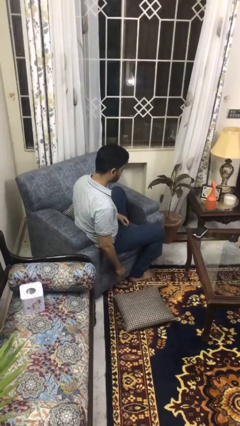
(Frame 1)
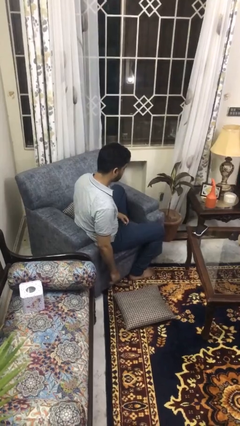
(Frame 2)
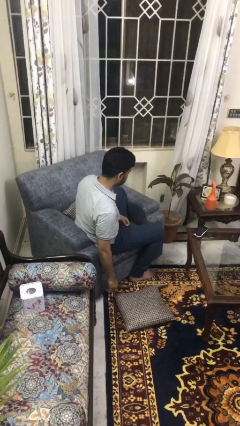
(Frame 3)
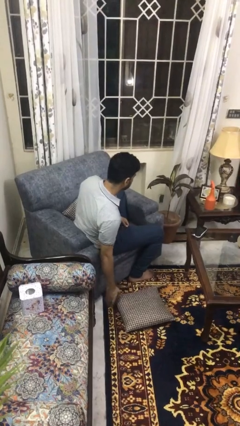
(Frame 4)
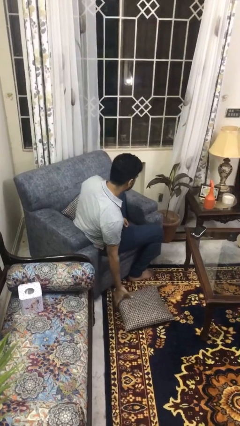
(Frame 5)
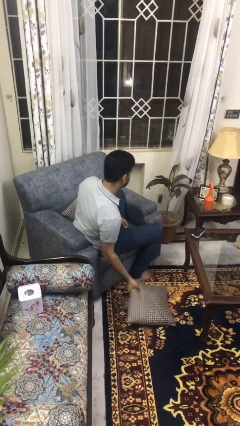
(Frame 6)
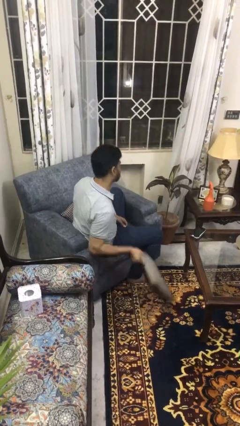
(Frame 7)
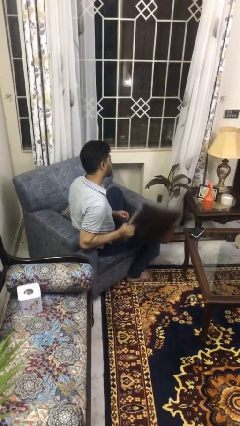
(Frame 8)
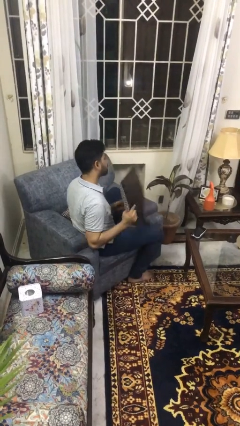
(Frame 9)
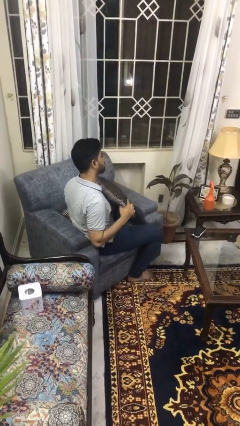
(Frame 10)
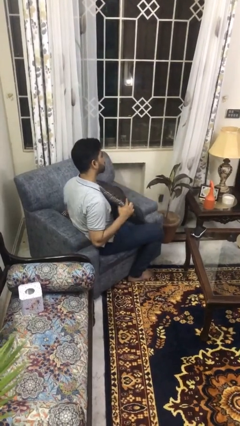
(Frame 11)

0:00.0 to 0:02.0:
person picks up object from floor

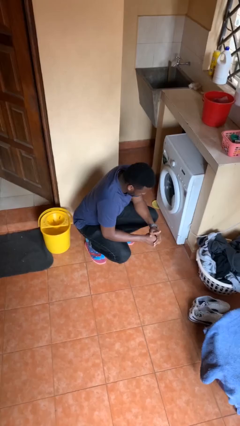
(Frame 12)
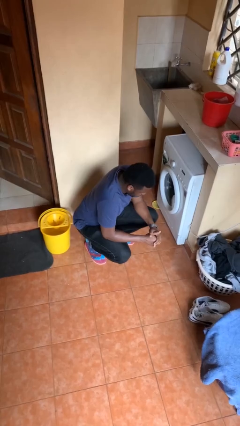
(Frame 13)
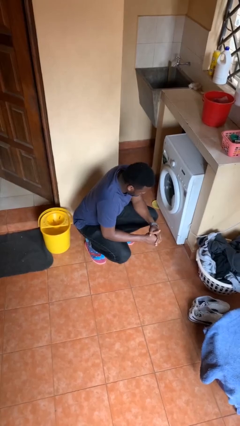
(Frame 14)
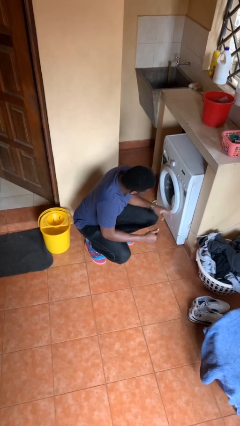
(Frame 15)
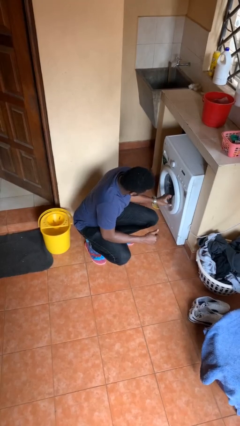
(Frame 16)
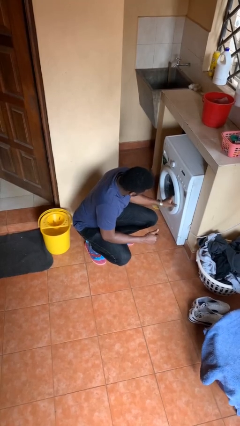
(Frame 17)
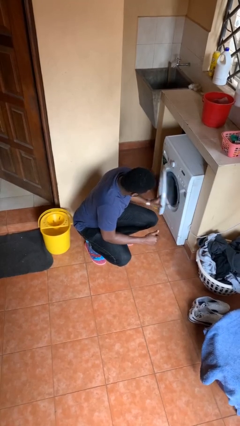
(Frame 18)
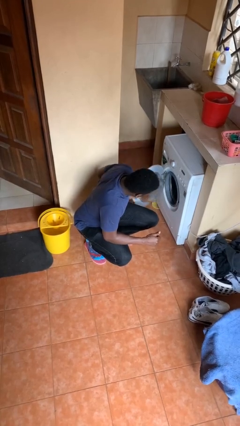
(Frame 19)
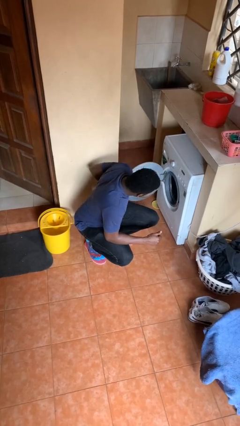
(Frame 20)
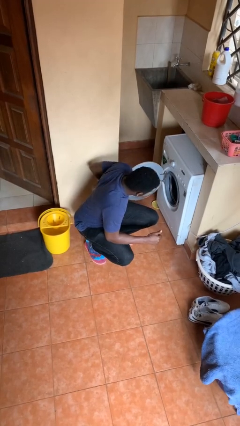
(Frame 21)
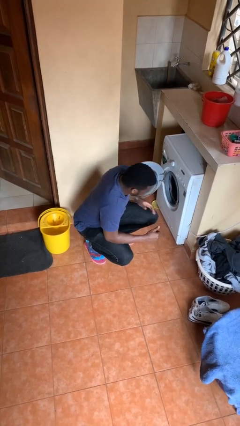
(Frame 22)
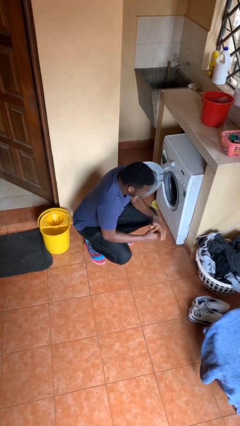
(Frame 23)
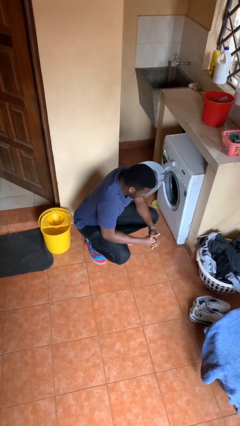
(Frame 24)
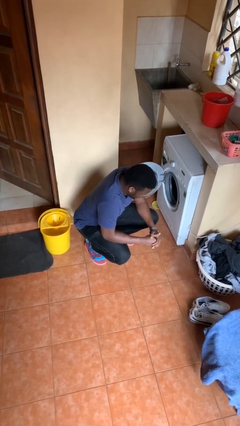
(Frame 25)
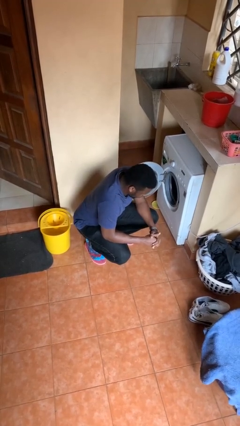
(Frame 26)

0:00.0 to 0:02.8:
person opens clothes washer

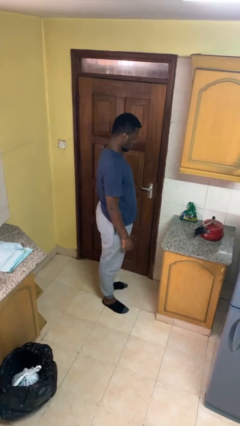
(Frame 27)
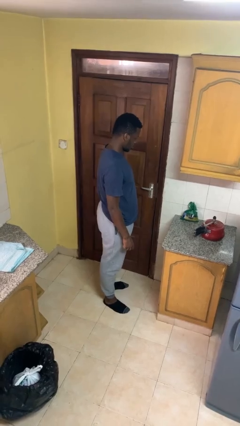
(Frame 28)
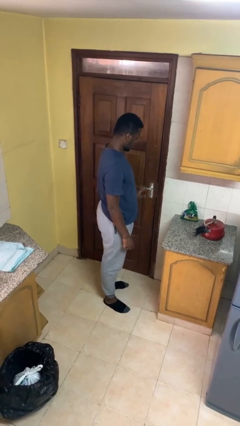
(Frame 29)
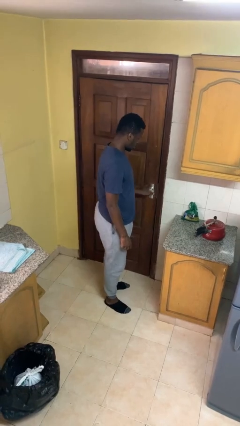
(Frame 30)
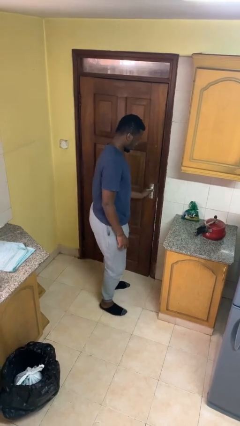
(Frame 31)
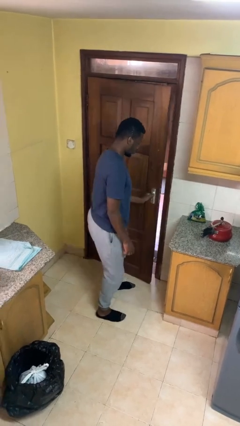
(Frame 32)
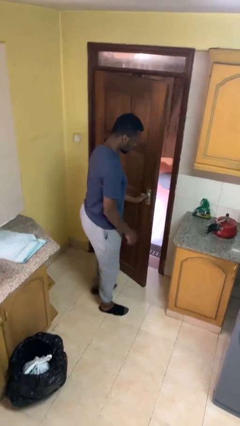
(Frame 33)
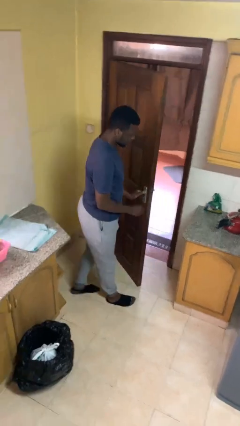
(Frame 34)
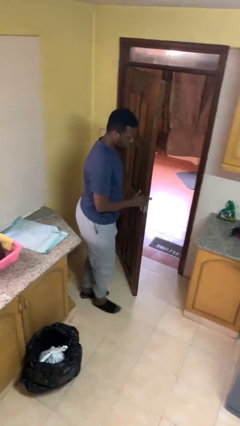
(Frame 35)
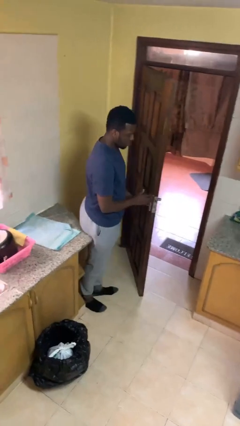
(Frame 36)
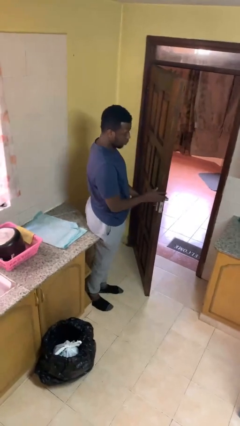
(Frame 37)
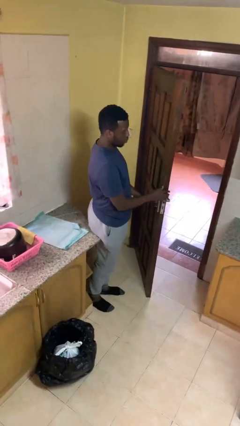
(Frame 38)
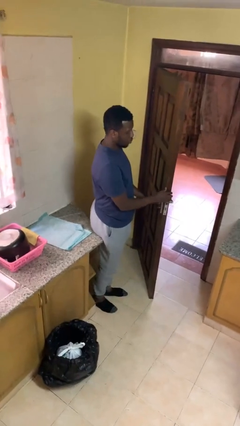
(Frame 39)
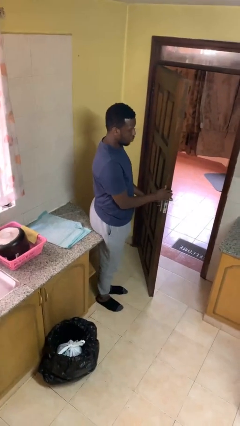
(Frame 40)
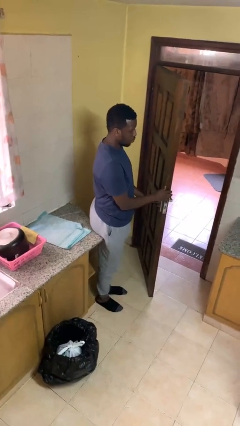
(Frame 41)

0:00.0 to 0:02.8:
person opens facility door

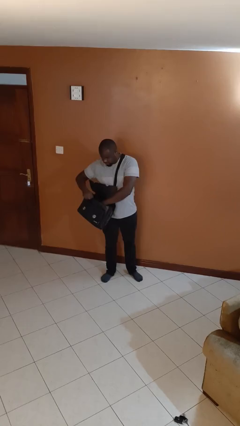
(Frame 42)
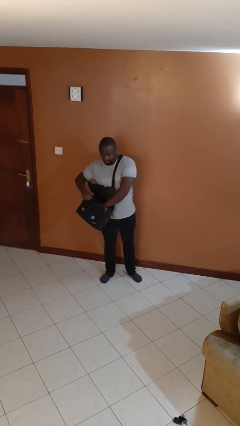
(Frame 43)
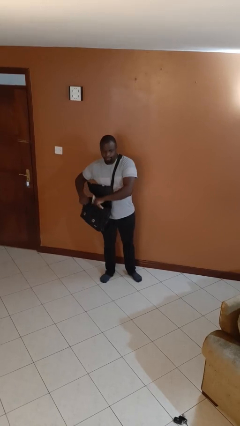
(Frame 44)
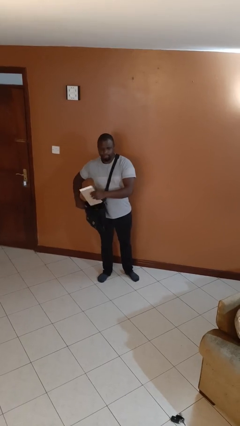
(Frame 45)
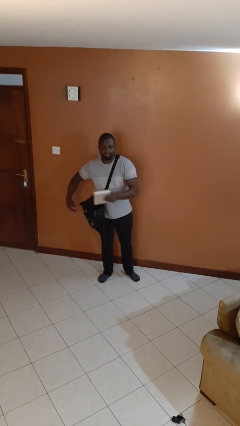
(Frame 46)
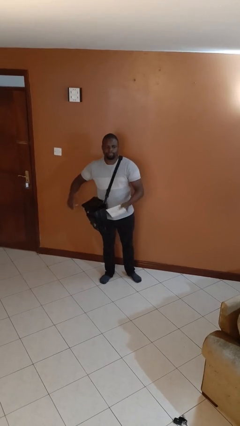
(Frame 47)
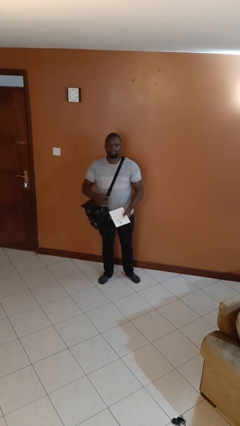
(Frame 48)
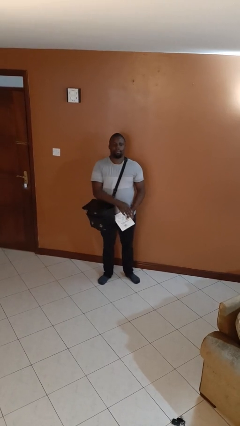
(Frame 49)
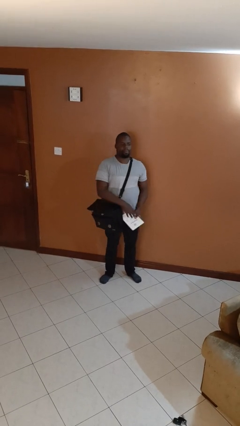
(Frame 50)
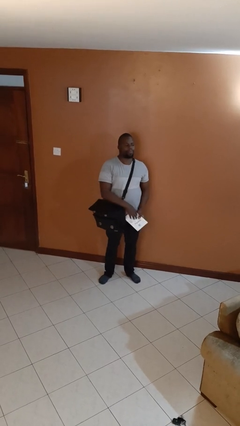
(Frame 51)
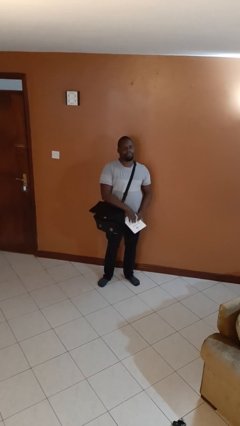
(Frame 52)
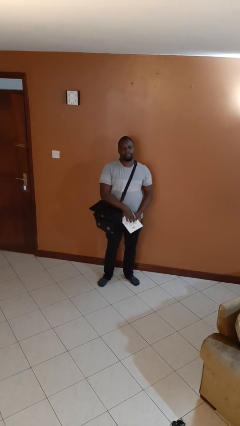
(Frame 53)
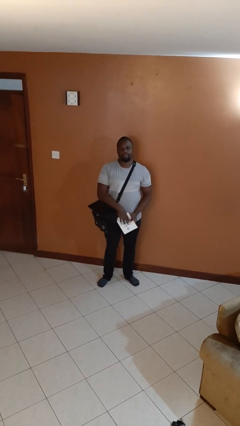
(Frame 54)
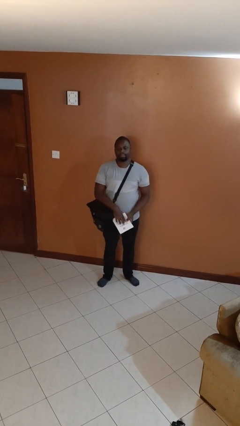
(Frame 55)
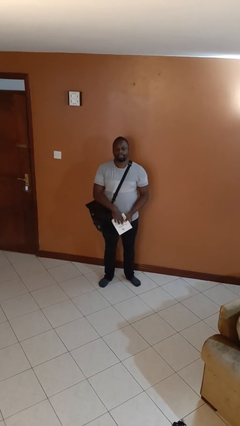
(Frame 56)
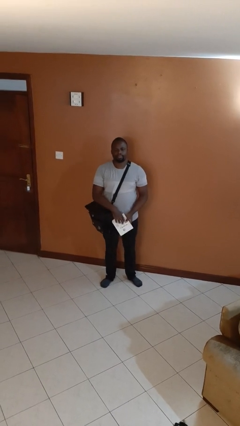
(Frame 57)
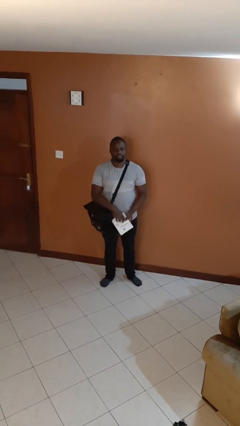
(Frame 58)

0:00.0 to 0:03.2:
person takes object from purse

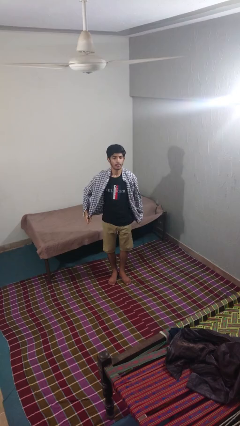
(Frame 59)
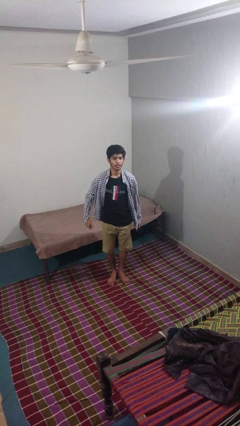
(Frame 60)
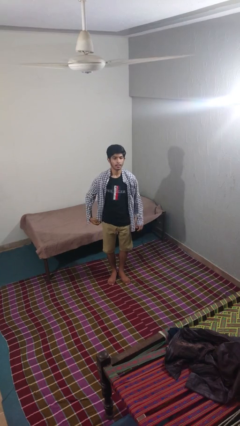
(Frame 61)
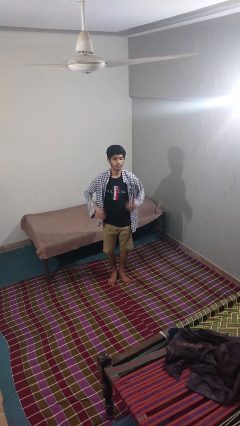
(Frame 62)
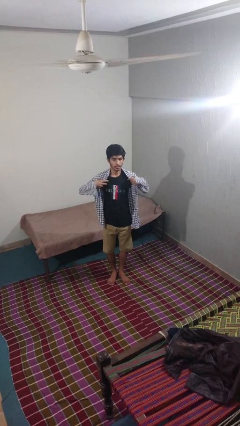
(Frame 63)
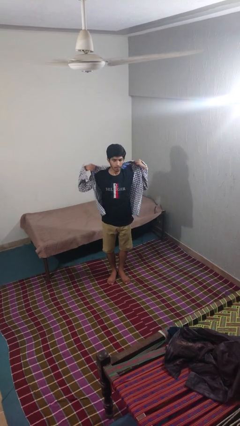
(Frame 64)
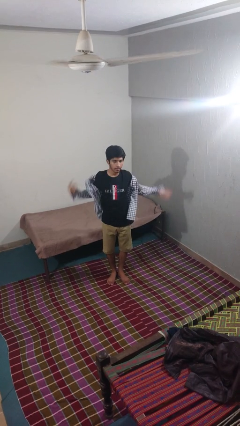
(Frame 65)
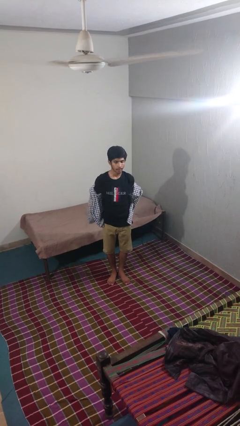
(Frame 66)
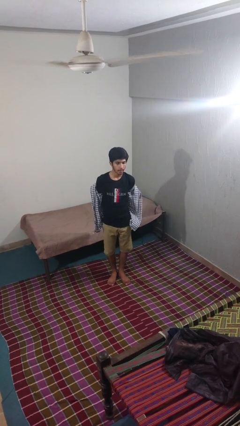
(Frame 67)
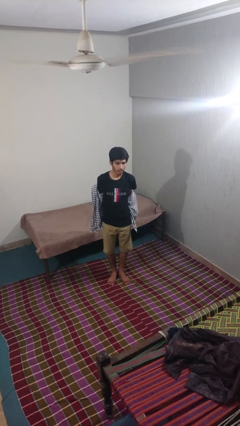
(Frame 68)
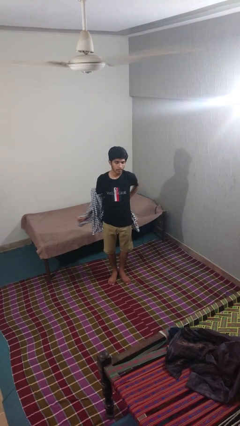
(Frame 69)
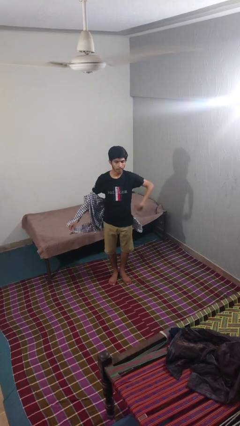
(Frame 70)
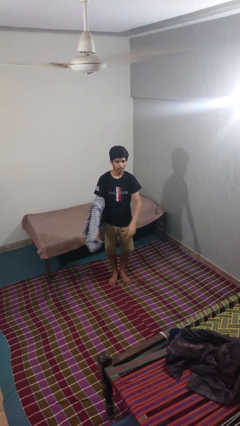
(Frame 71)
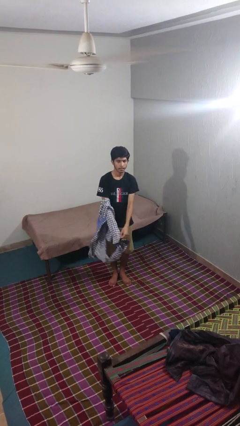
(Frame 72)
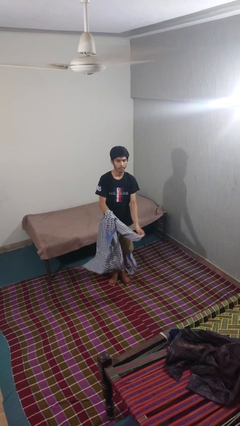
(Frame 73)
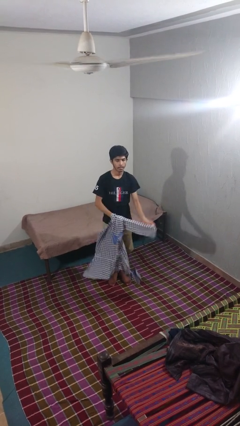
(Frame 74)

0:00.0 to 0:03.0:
person takes off shirt

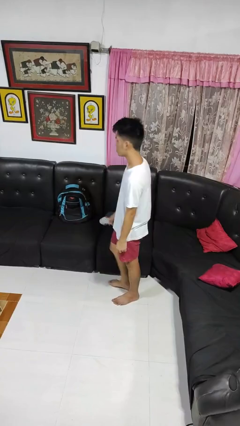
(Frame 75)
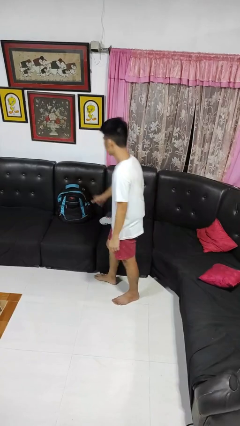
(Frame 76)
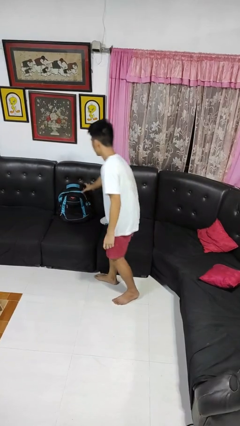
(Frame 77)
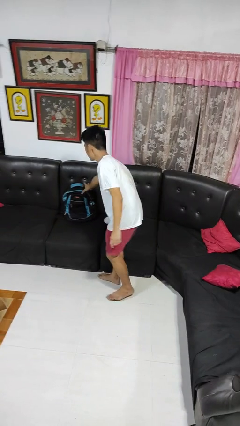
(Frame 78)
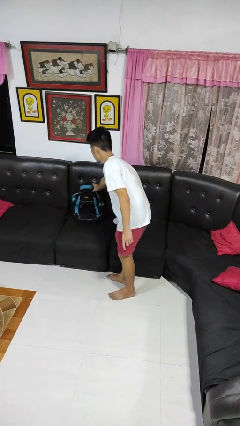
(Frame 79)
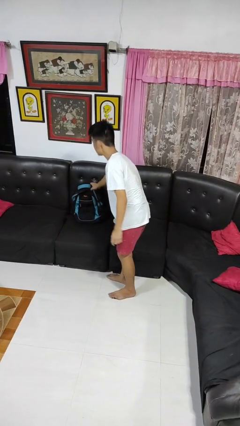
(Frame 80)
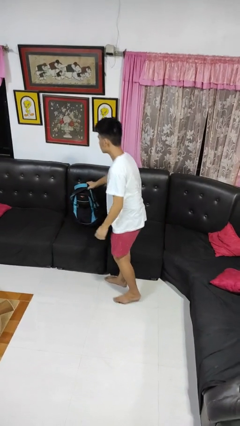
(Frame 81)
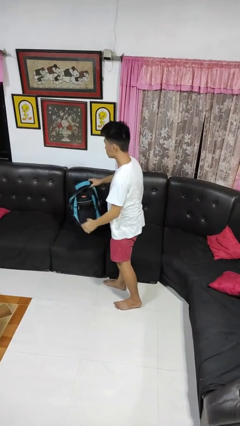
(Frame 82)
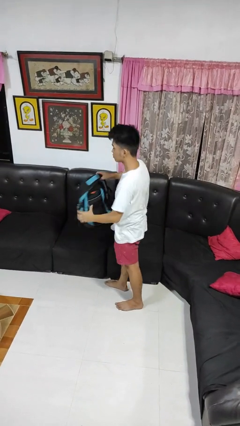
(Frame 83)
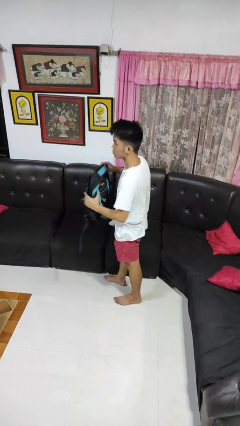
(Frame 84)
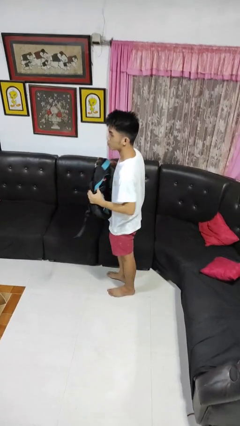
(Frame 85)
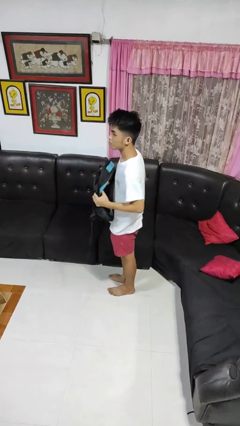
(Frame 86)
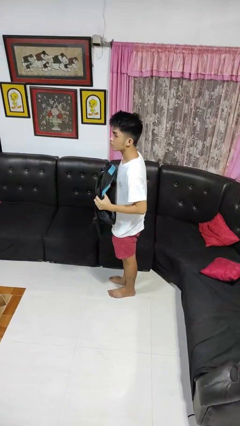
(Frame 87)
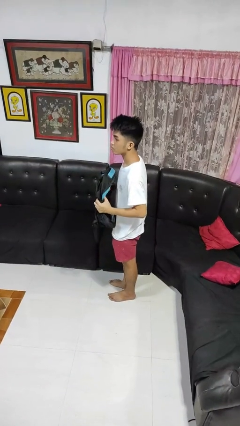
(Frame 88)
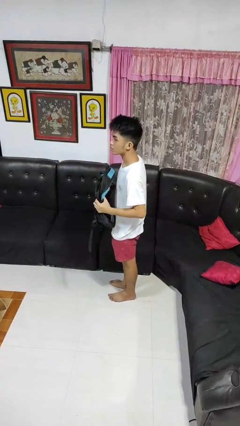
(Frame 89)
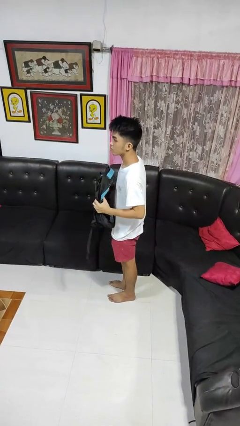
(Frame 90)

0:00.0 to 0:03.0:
person picks up object from couch

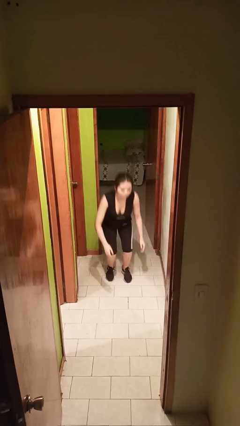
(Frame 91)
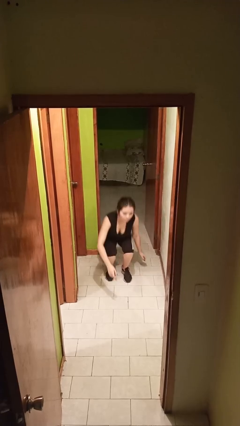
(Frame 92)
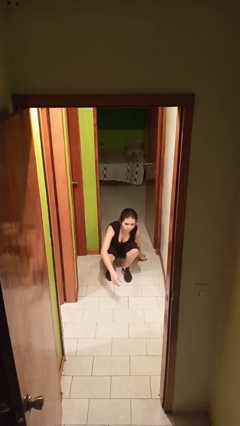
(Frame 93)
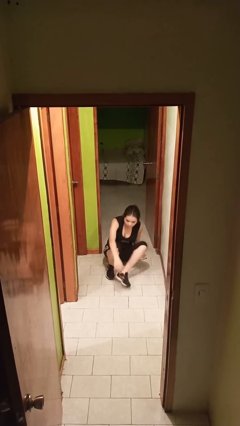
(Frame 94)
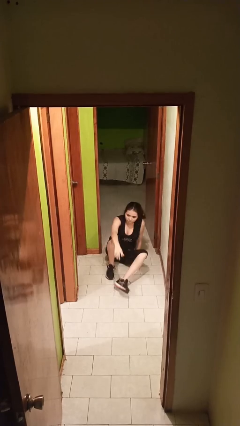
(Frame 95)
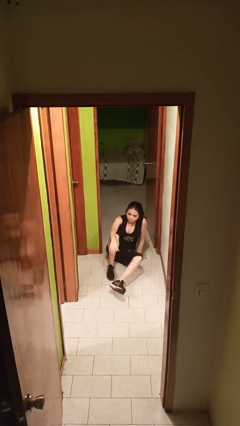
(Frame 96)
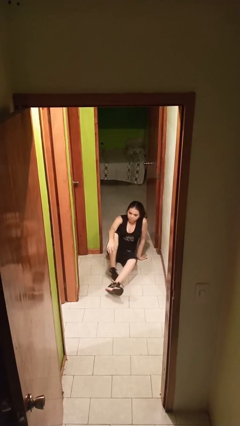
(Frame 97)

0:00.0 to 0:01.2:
person sits down
